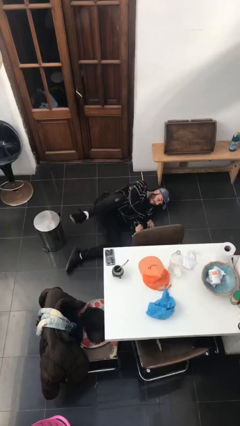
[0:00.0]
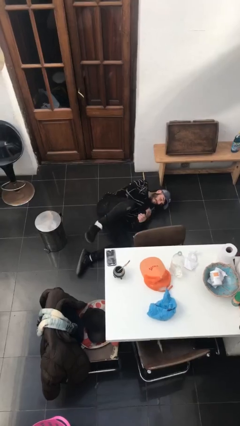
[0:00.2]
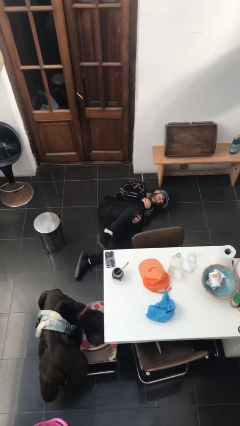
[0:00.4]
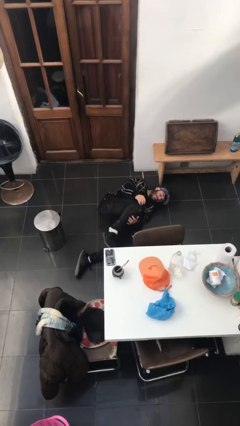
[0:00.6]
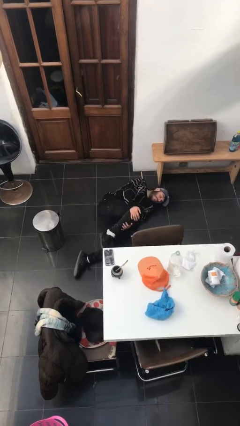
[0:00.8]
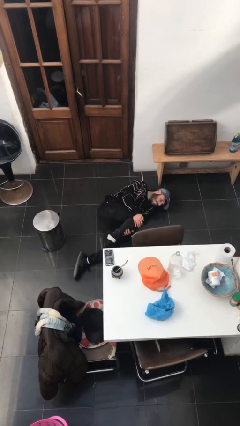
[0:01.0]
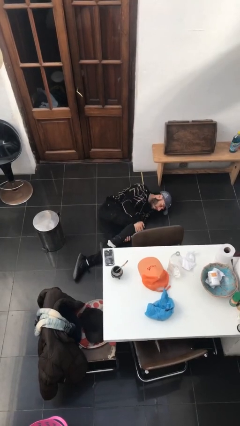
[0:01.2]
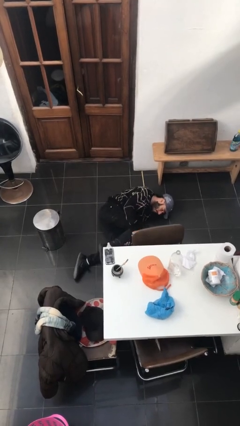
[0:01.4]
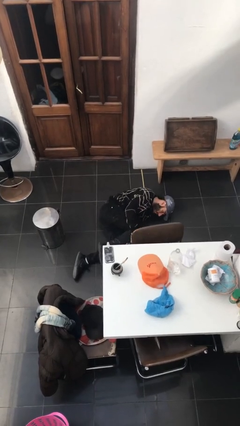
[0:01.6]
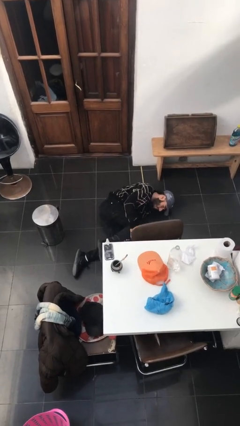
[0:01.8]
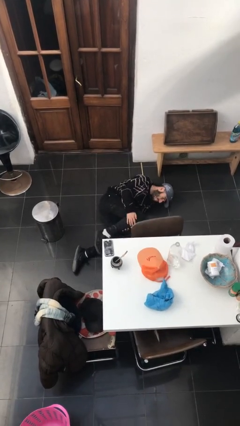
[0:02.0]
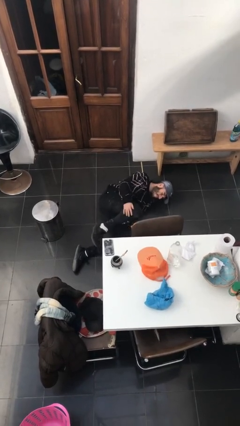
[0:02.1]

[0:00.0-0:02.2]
person lies down on floor

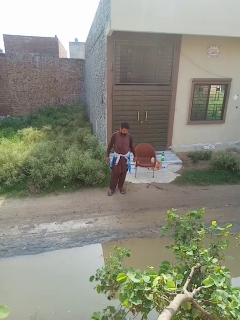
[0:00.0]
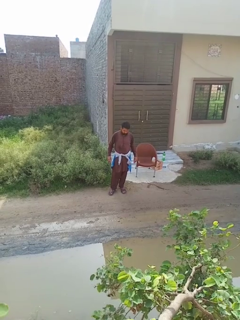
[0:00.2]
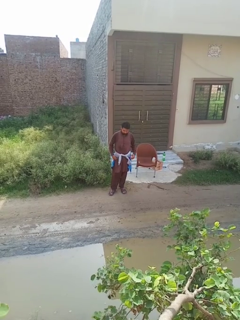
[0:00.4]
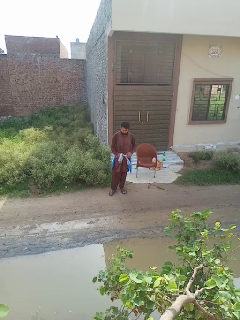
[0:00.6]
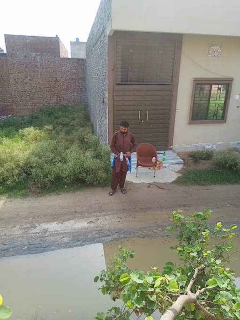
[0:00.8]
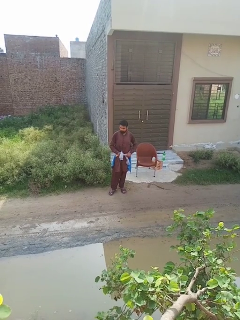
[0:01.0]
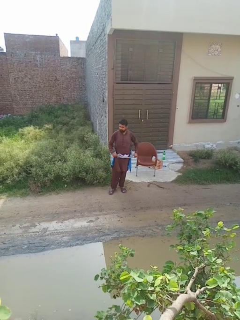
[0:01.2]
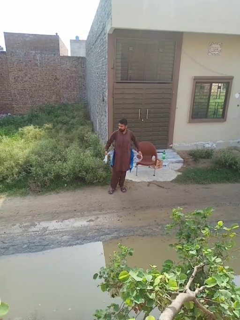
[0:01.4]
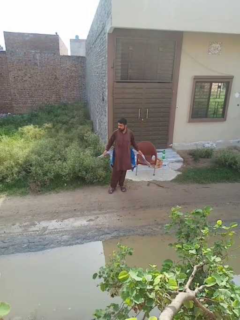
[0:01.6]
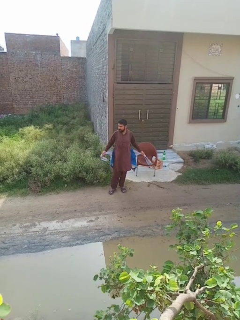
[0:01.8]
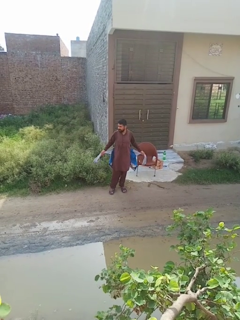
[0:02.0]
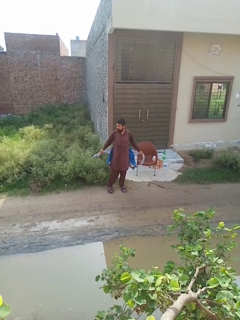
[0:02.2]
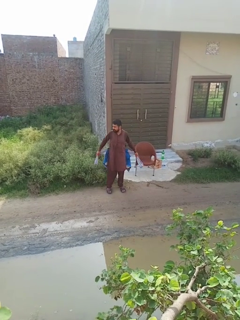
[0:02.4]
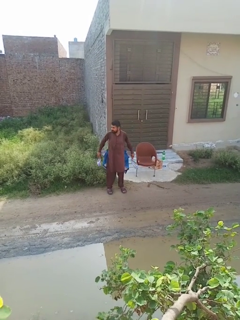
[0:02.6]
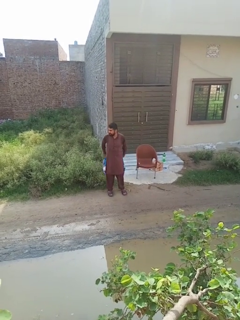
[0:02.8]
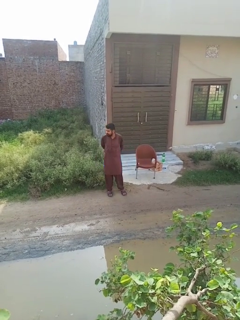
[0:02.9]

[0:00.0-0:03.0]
person unties jacket around waist

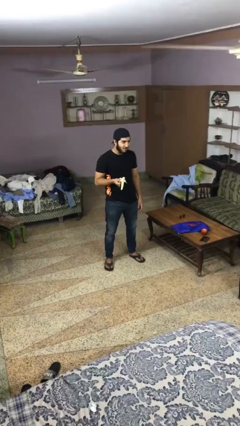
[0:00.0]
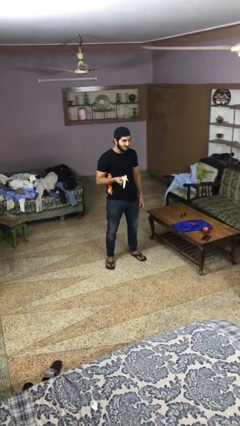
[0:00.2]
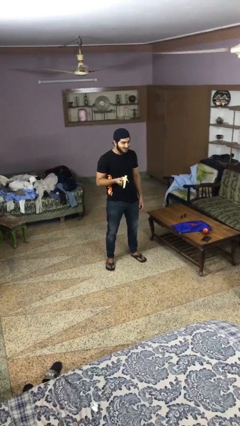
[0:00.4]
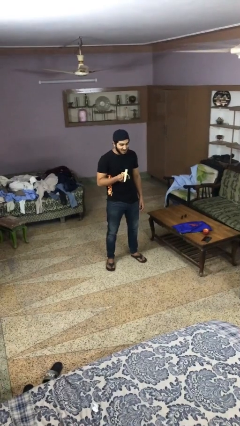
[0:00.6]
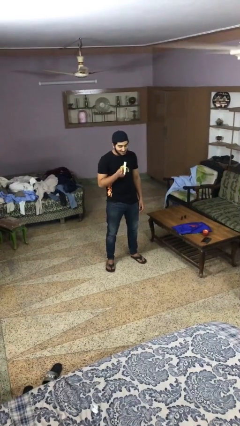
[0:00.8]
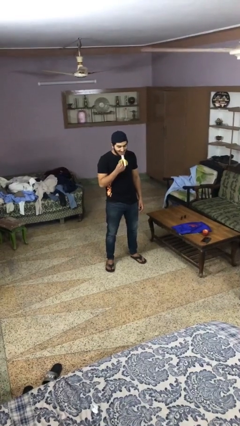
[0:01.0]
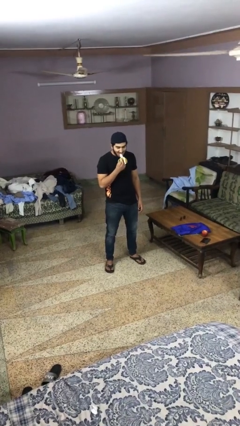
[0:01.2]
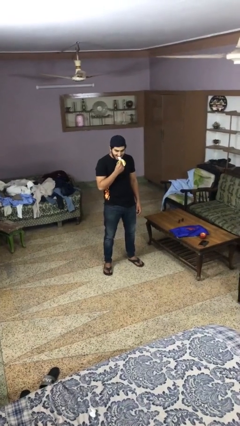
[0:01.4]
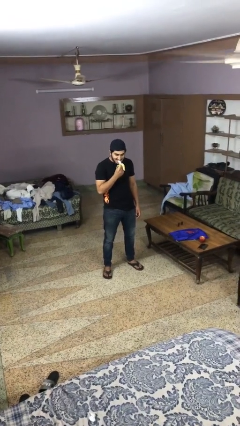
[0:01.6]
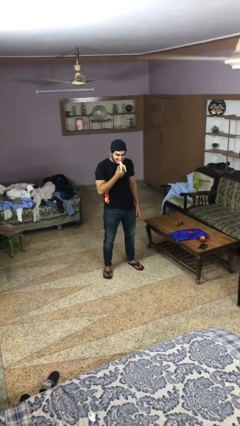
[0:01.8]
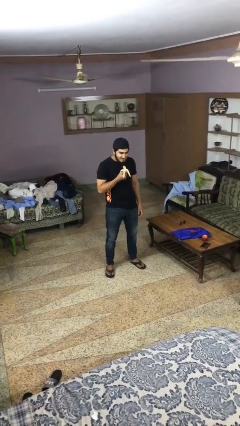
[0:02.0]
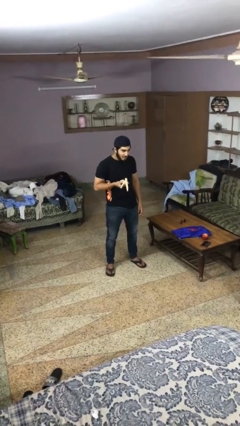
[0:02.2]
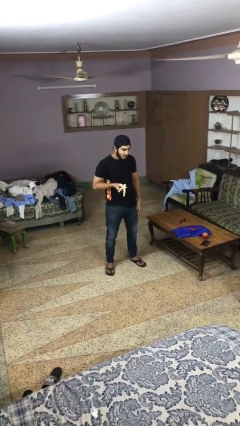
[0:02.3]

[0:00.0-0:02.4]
person eats banana

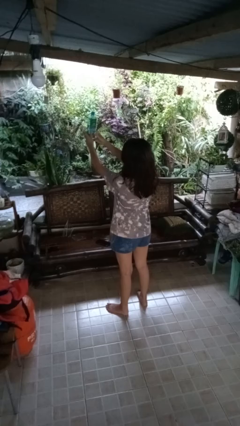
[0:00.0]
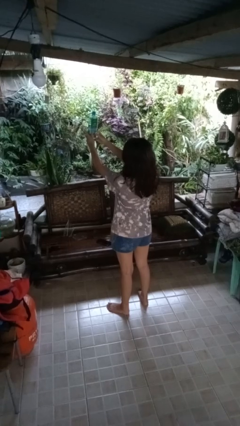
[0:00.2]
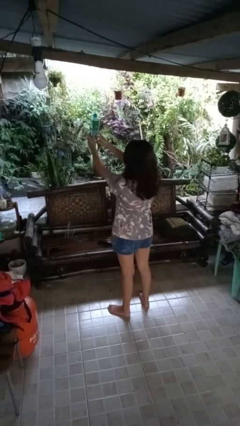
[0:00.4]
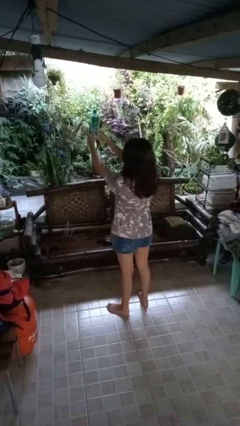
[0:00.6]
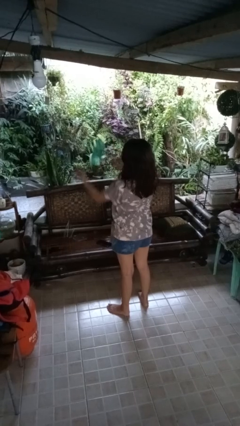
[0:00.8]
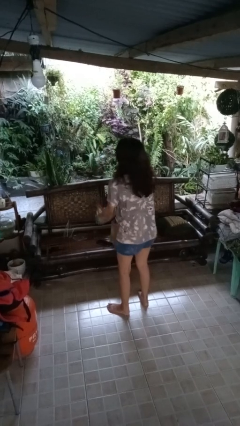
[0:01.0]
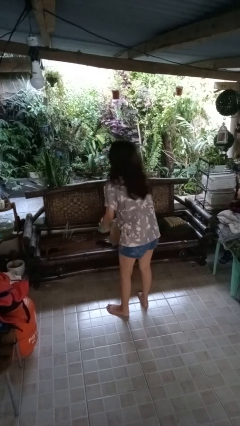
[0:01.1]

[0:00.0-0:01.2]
person drops object

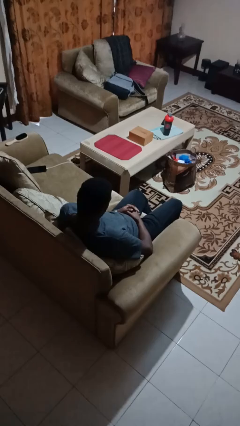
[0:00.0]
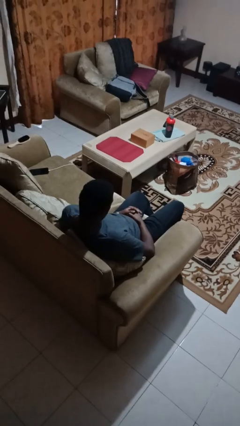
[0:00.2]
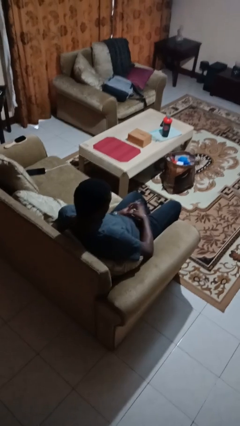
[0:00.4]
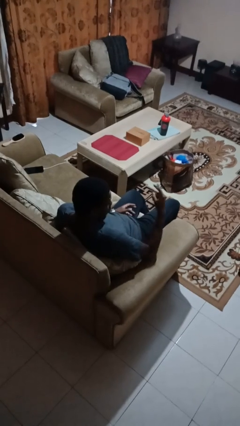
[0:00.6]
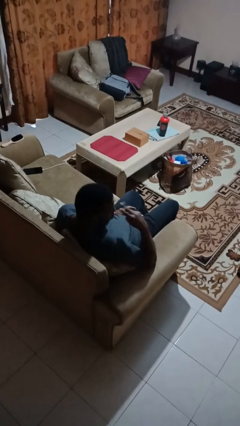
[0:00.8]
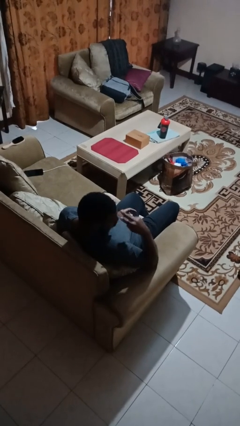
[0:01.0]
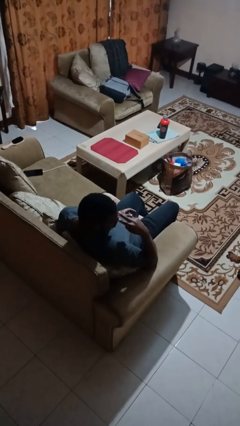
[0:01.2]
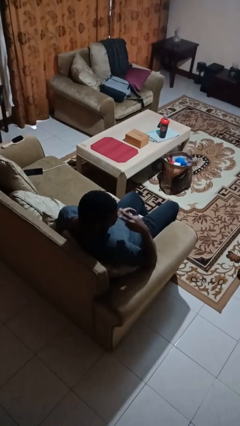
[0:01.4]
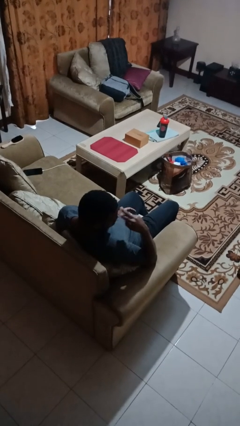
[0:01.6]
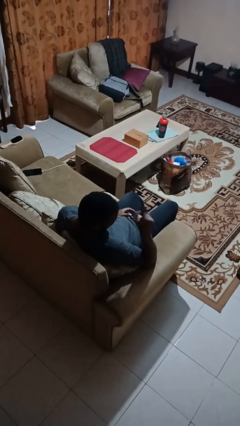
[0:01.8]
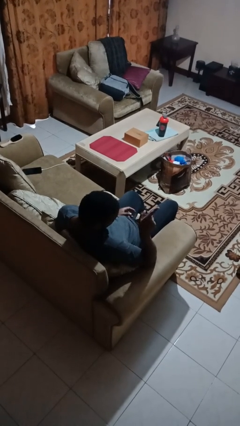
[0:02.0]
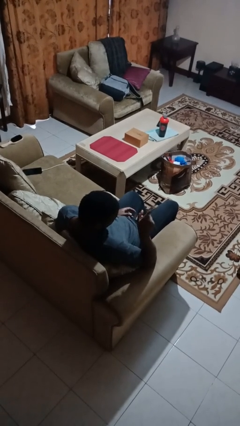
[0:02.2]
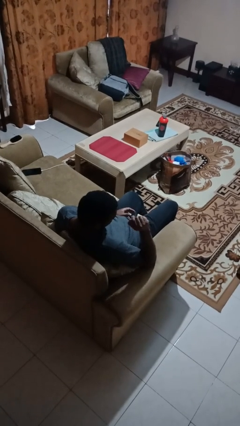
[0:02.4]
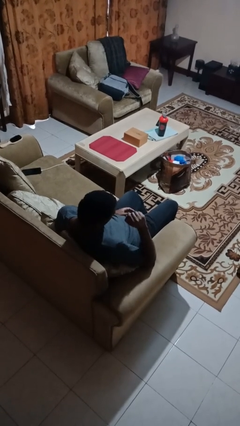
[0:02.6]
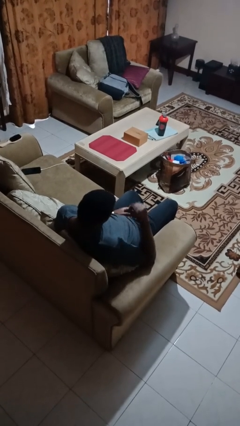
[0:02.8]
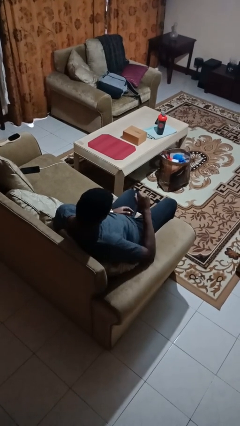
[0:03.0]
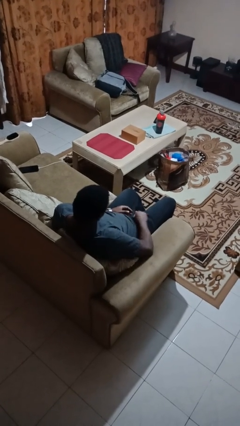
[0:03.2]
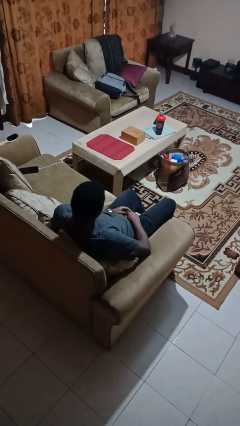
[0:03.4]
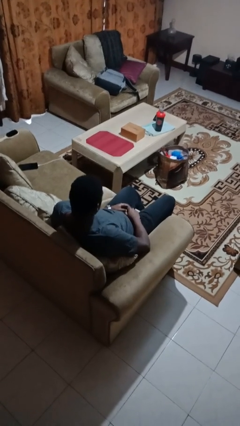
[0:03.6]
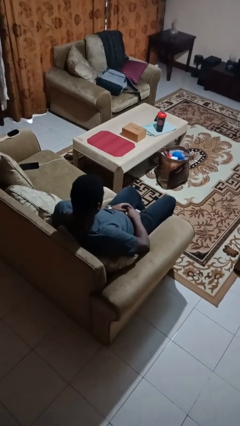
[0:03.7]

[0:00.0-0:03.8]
person gestures watch closely

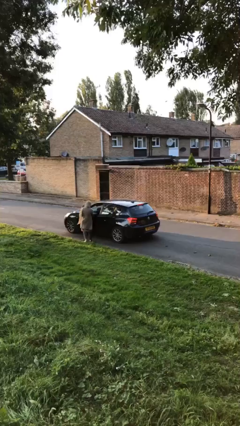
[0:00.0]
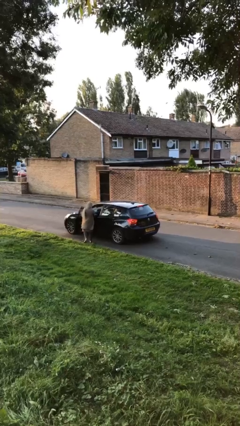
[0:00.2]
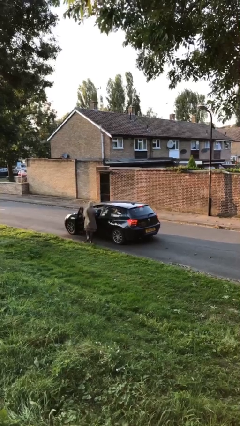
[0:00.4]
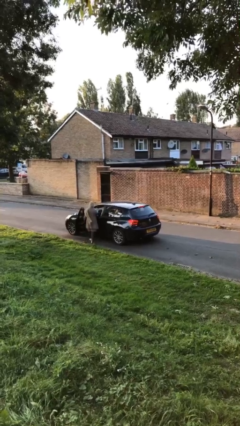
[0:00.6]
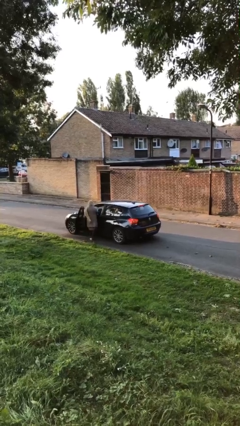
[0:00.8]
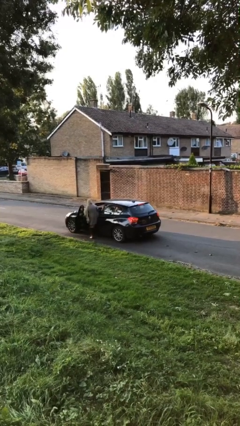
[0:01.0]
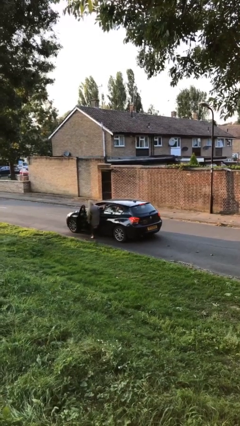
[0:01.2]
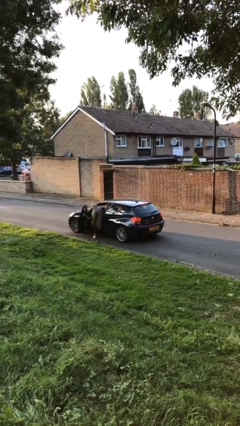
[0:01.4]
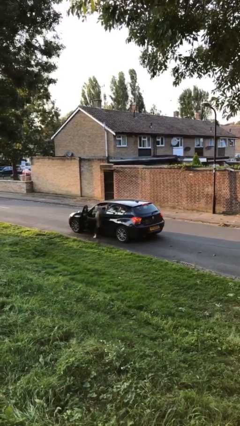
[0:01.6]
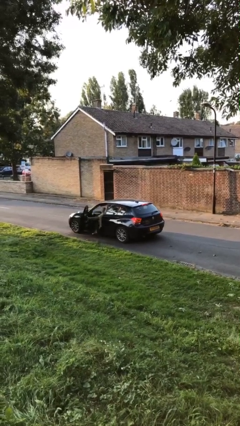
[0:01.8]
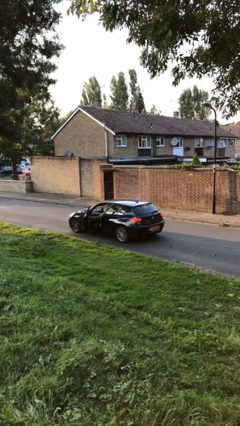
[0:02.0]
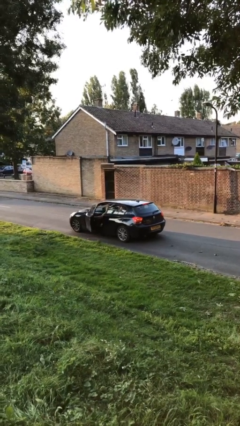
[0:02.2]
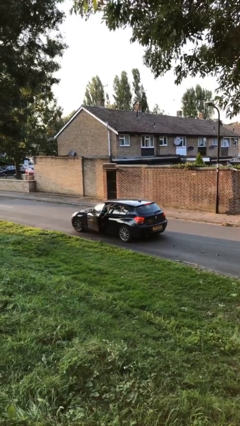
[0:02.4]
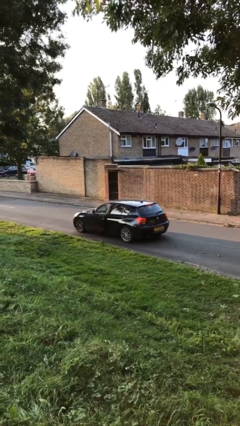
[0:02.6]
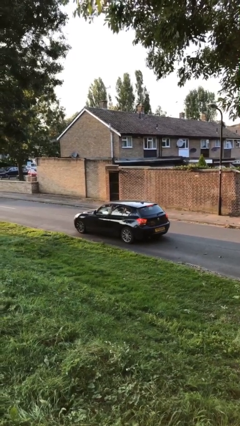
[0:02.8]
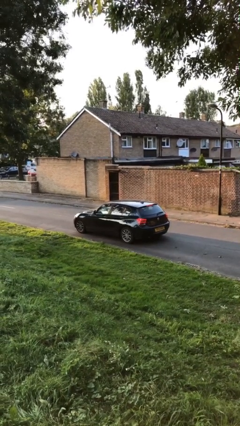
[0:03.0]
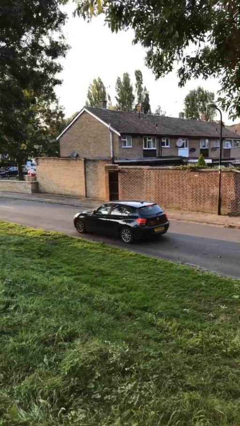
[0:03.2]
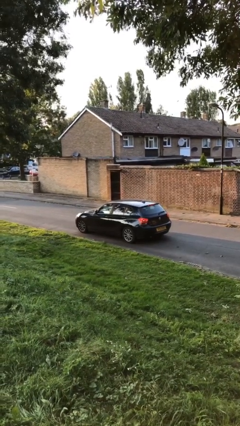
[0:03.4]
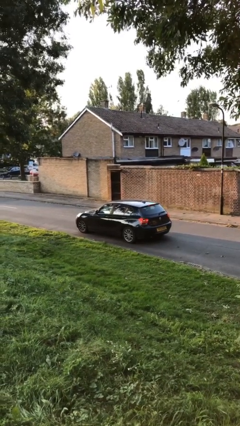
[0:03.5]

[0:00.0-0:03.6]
car picks up person

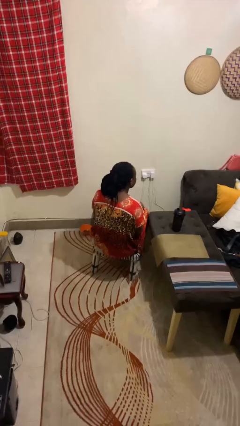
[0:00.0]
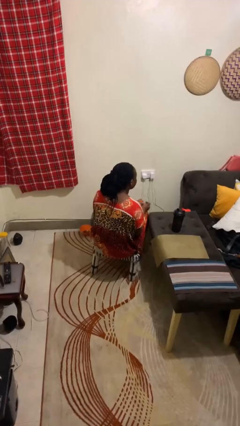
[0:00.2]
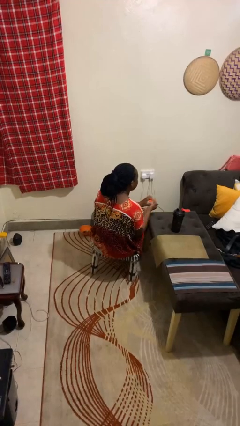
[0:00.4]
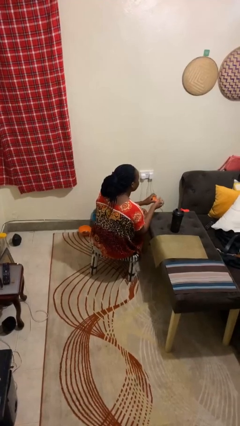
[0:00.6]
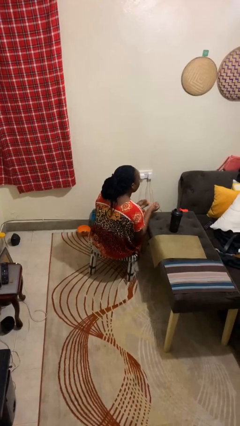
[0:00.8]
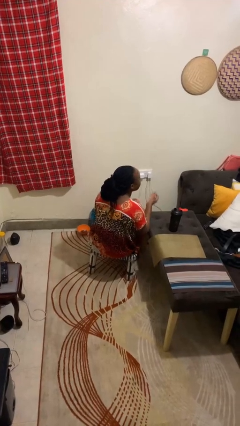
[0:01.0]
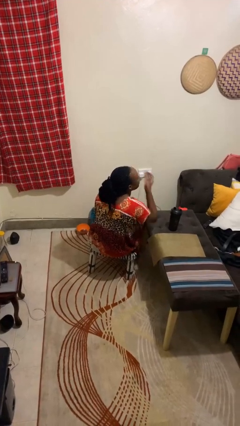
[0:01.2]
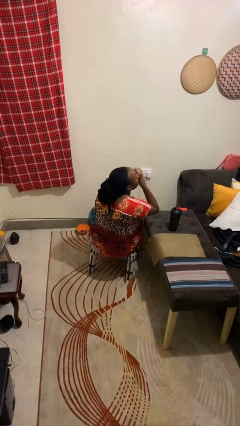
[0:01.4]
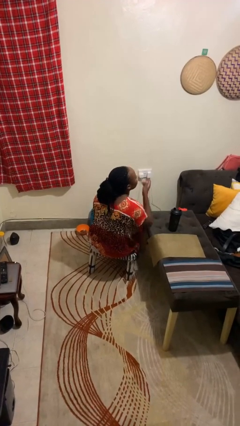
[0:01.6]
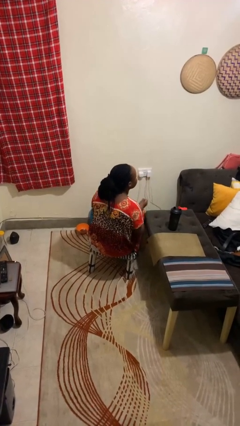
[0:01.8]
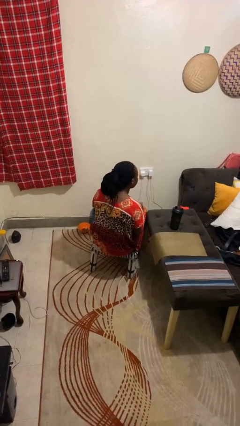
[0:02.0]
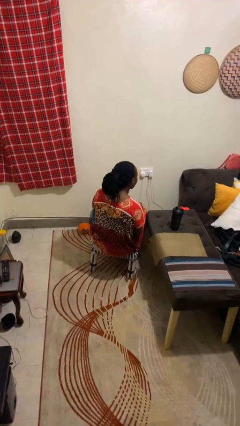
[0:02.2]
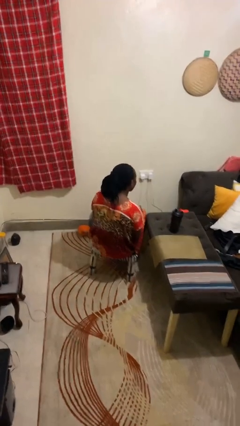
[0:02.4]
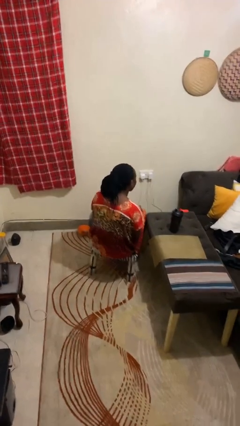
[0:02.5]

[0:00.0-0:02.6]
person takes medicine pills
